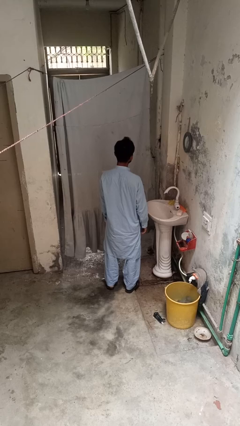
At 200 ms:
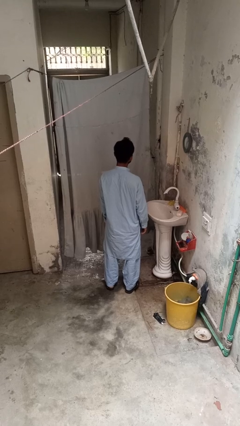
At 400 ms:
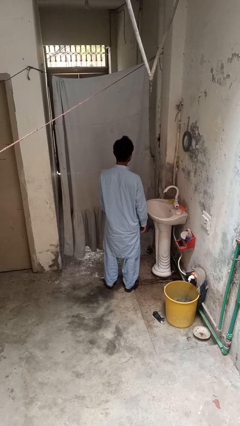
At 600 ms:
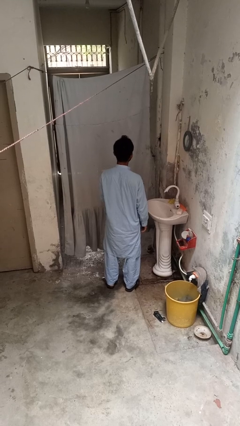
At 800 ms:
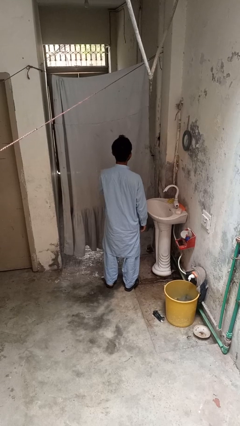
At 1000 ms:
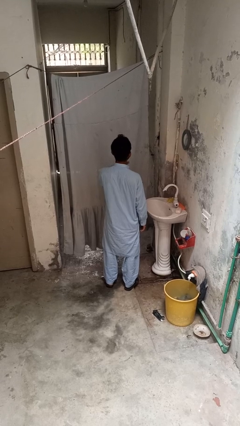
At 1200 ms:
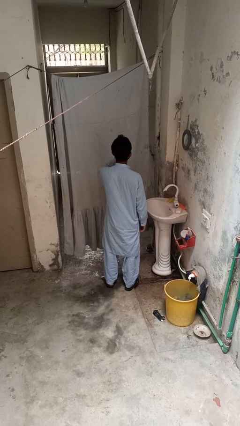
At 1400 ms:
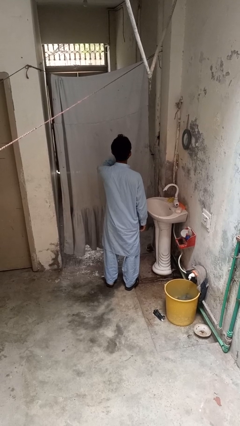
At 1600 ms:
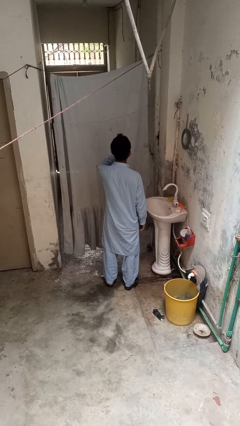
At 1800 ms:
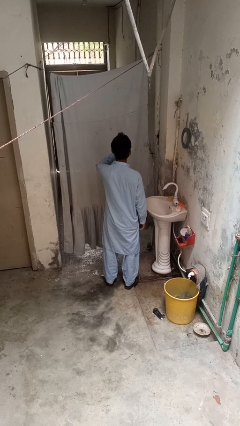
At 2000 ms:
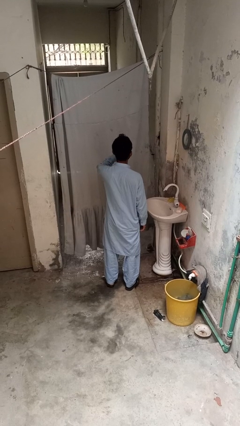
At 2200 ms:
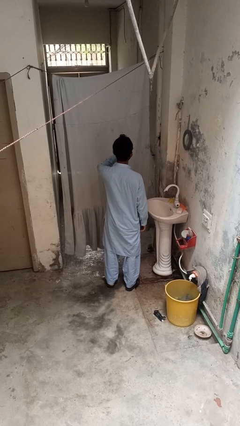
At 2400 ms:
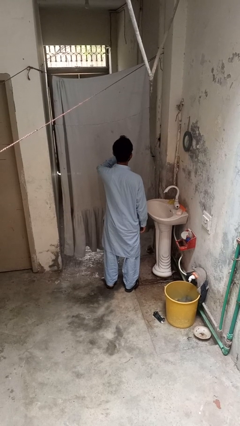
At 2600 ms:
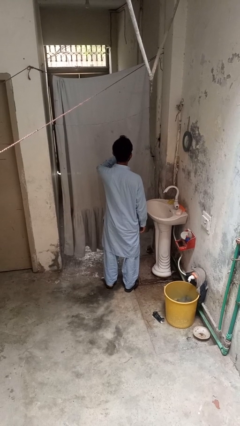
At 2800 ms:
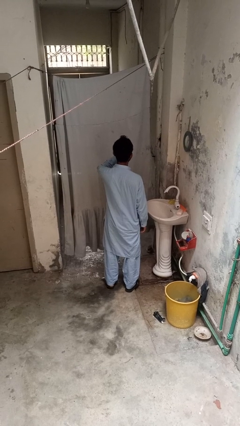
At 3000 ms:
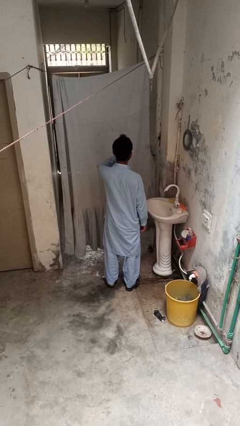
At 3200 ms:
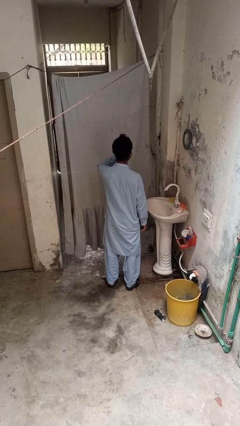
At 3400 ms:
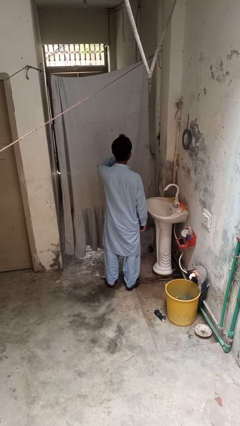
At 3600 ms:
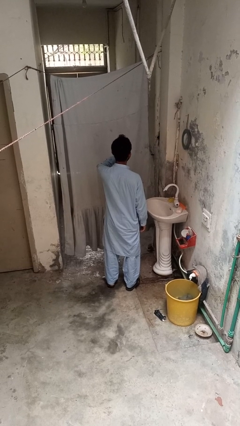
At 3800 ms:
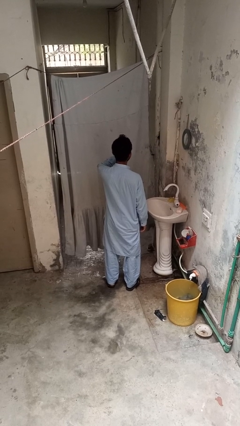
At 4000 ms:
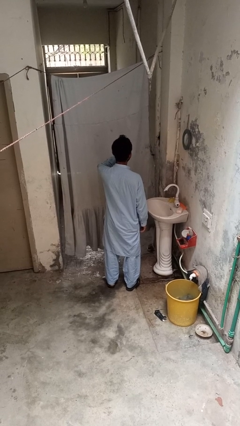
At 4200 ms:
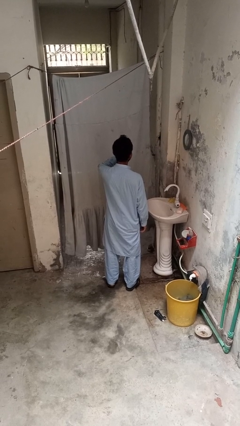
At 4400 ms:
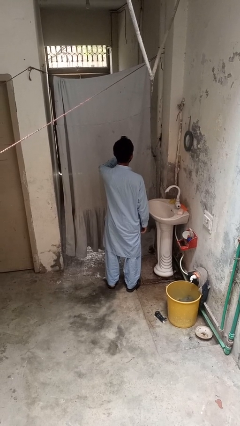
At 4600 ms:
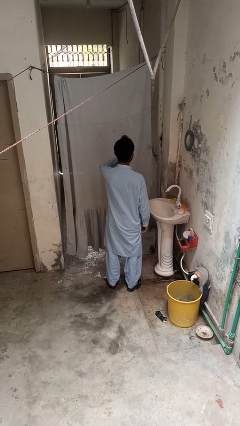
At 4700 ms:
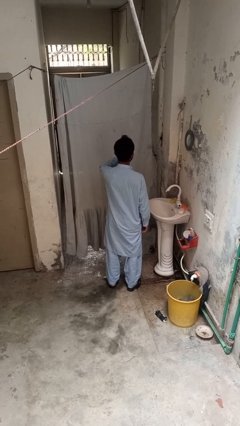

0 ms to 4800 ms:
person yawns

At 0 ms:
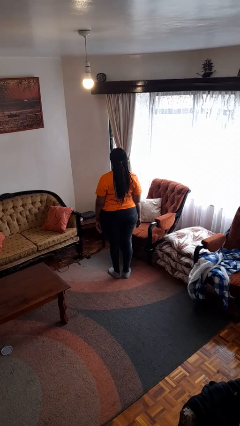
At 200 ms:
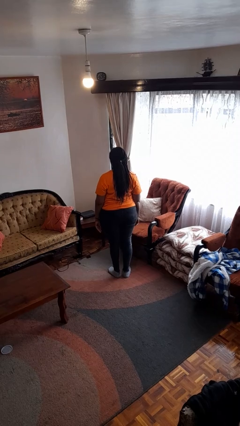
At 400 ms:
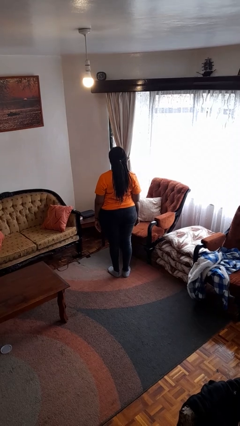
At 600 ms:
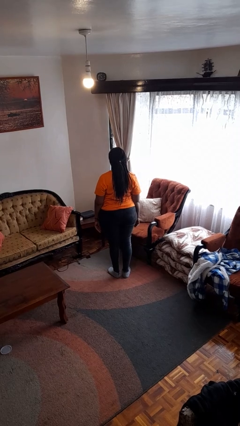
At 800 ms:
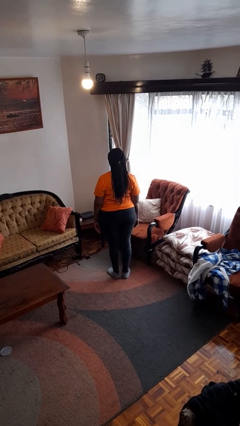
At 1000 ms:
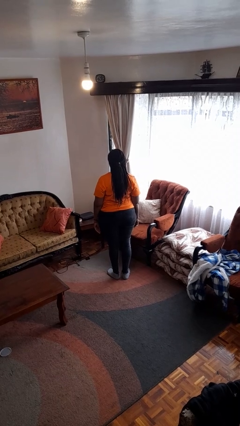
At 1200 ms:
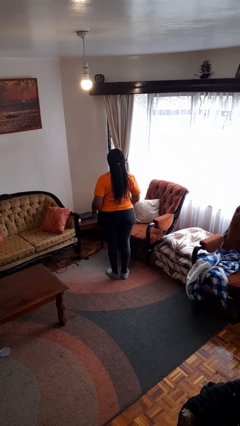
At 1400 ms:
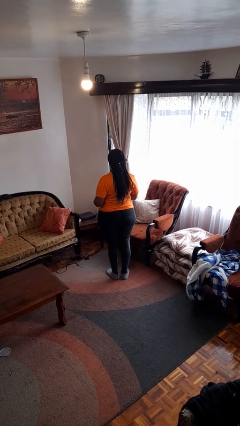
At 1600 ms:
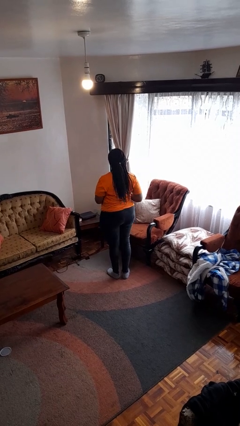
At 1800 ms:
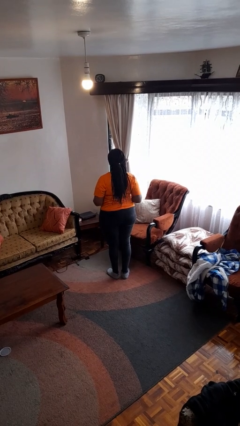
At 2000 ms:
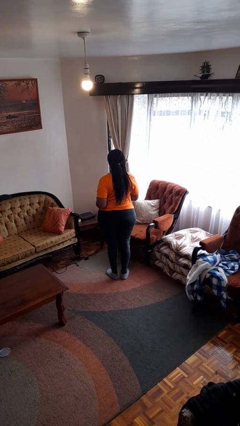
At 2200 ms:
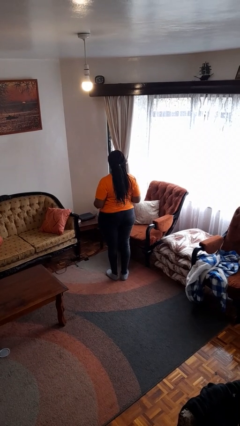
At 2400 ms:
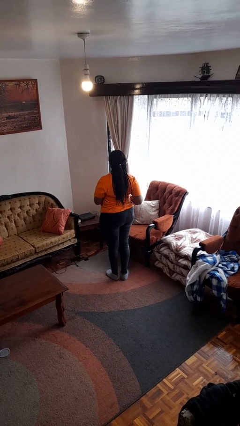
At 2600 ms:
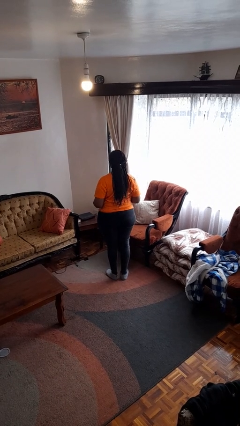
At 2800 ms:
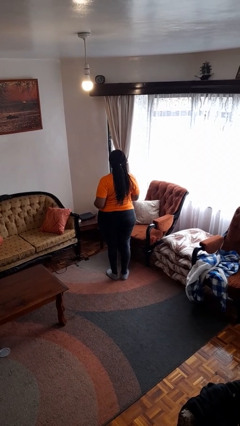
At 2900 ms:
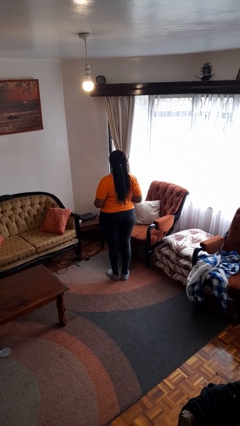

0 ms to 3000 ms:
person wiggles hips

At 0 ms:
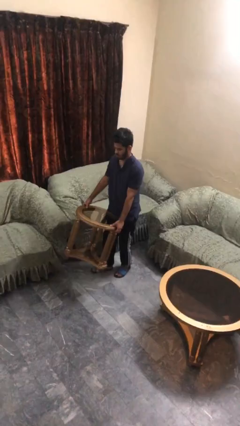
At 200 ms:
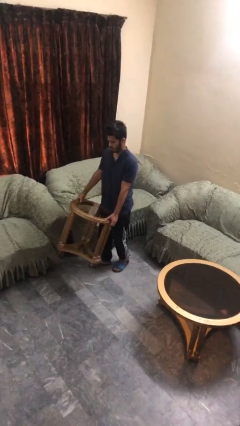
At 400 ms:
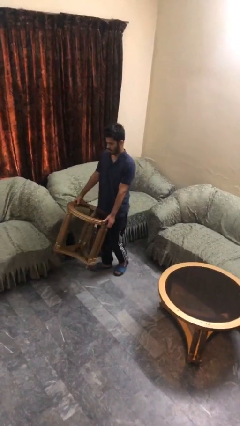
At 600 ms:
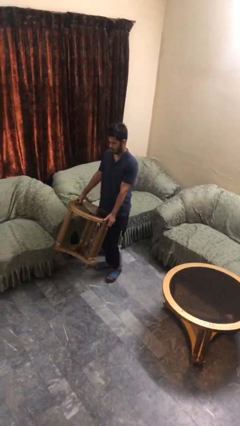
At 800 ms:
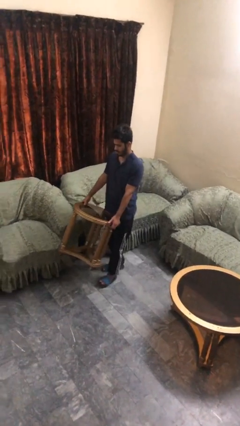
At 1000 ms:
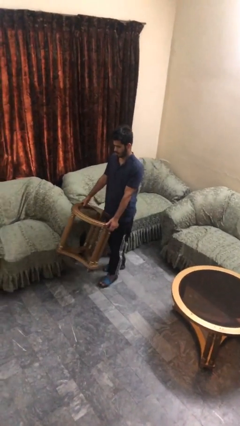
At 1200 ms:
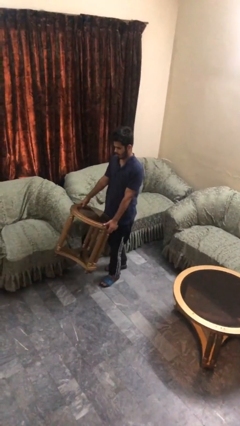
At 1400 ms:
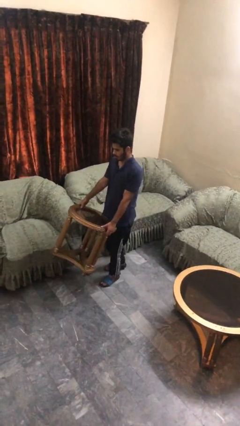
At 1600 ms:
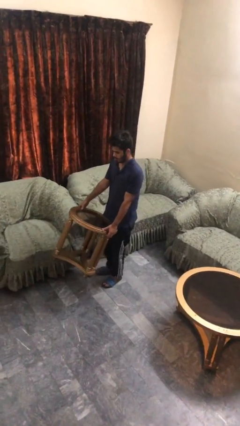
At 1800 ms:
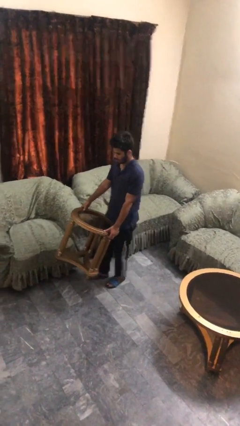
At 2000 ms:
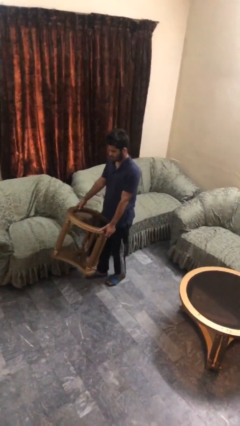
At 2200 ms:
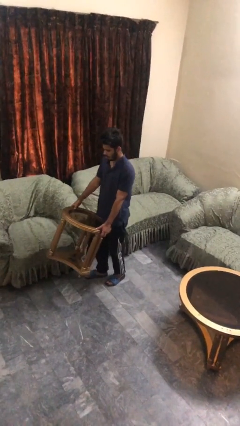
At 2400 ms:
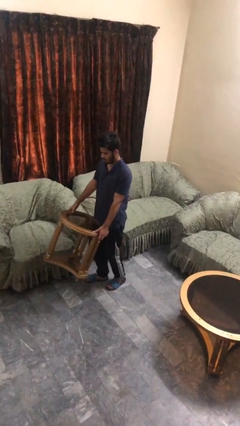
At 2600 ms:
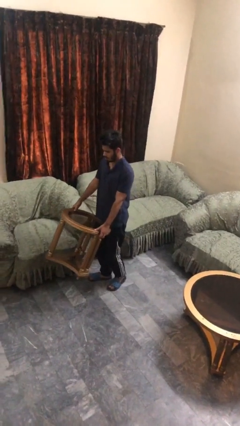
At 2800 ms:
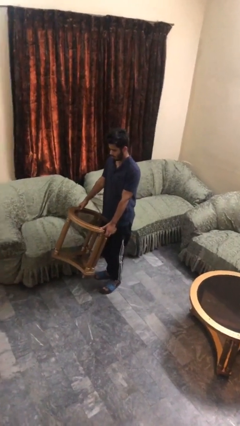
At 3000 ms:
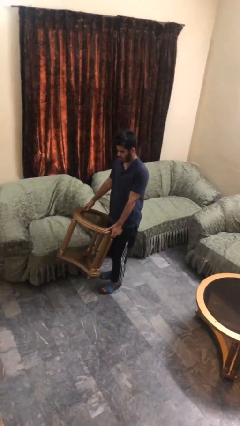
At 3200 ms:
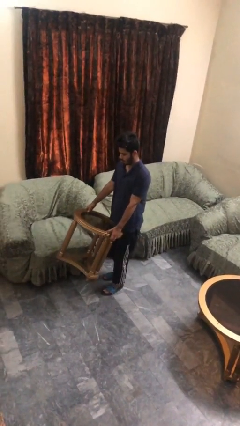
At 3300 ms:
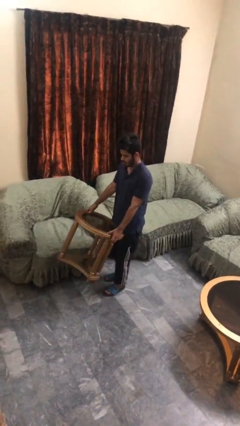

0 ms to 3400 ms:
person carries heavy object

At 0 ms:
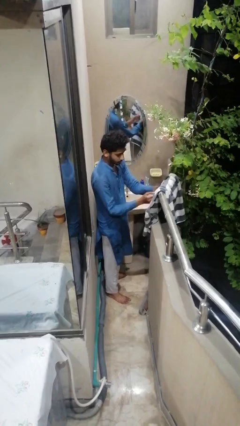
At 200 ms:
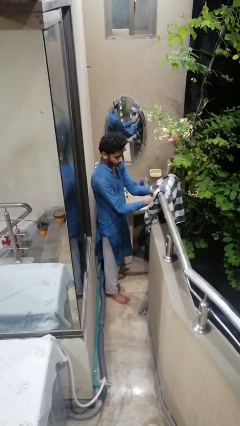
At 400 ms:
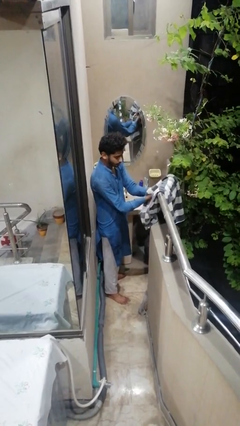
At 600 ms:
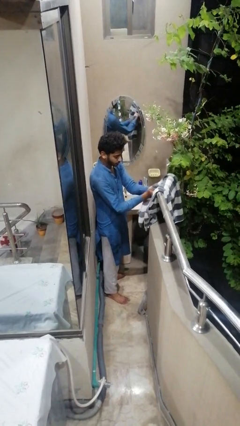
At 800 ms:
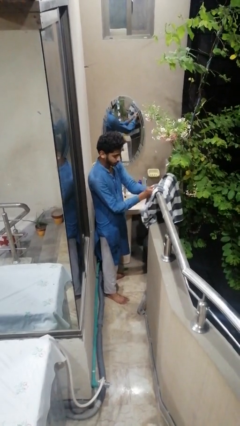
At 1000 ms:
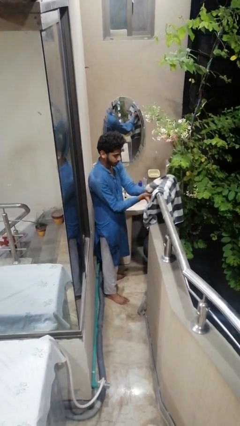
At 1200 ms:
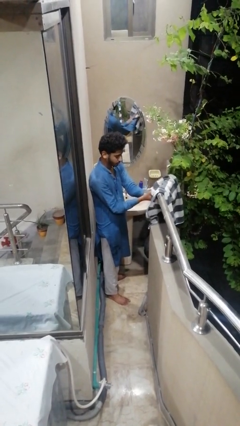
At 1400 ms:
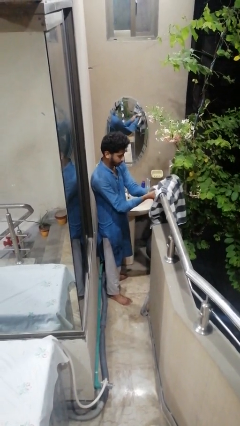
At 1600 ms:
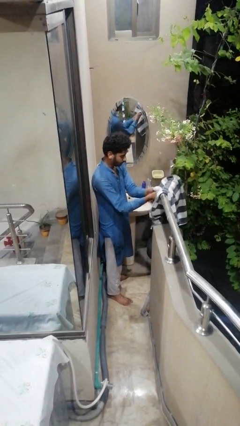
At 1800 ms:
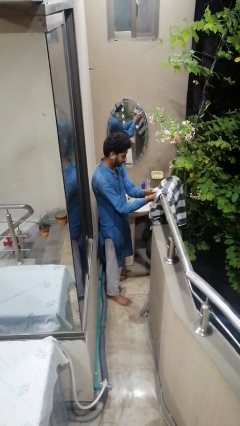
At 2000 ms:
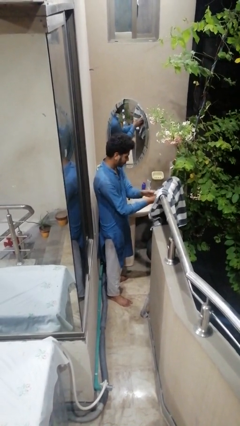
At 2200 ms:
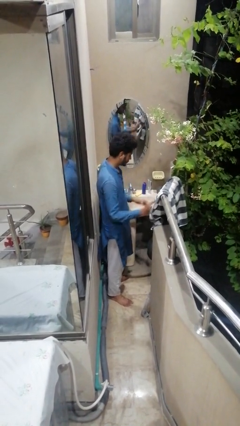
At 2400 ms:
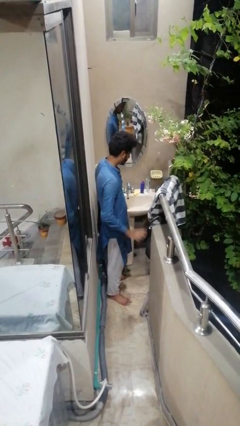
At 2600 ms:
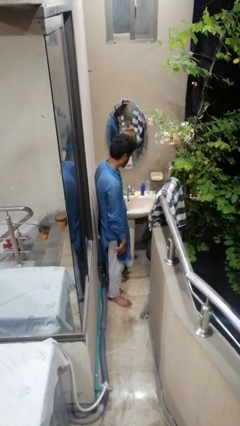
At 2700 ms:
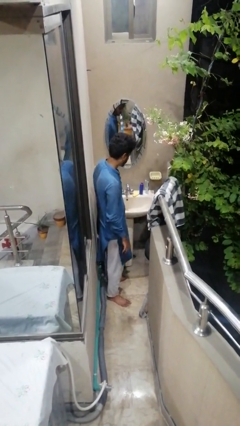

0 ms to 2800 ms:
person dries hands with towel

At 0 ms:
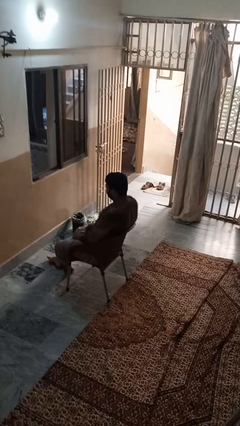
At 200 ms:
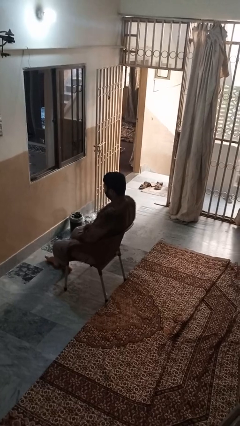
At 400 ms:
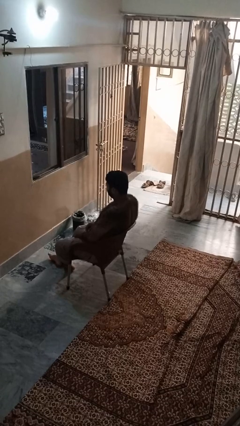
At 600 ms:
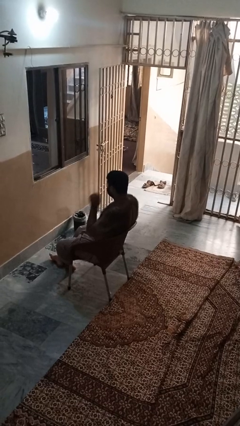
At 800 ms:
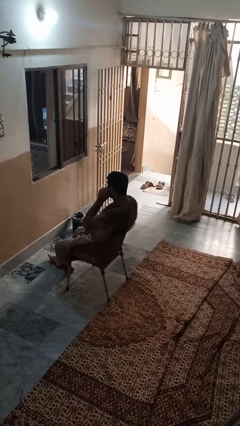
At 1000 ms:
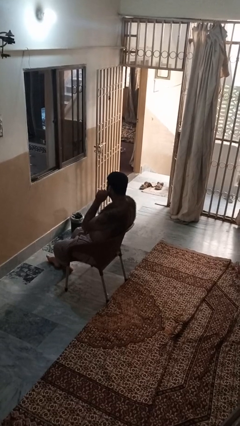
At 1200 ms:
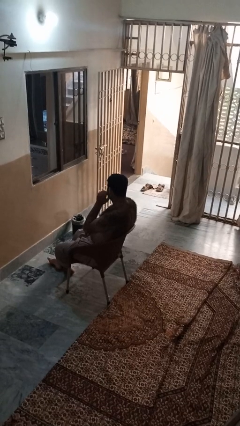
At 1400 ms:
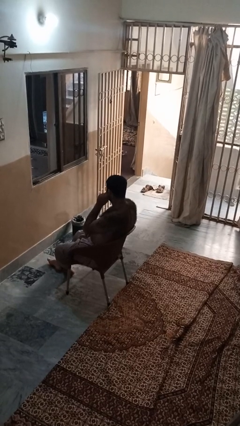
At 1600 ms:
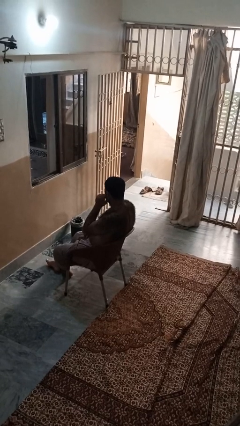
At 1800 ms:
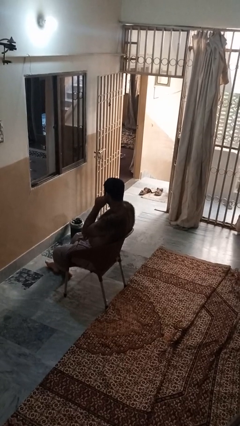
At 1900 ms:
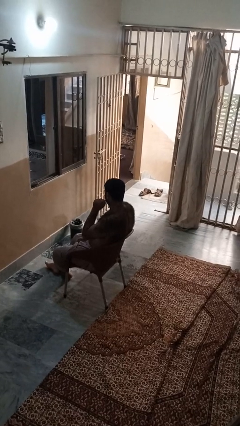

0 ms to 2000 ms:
person touches earlobe

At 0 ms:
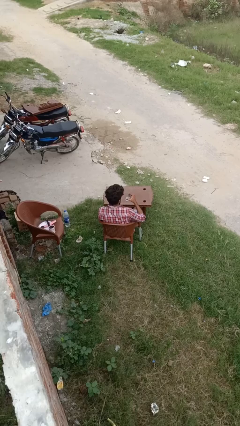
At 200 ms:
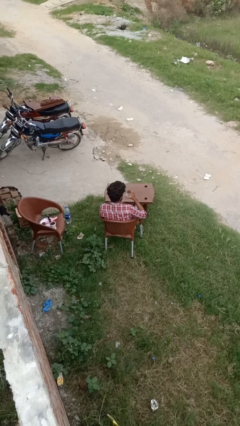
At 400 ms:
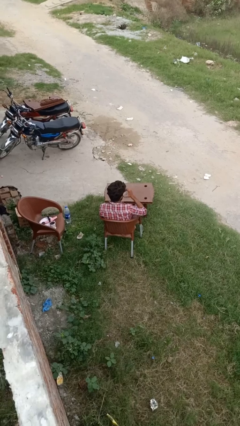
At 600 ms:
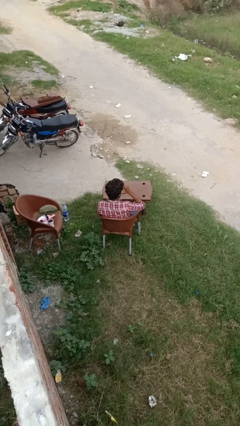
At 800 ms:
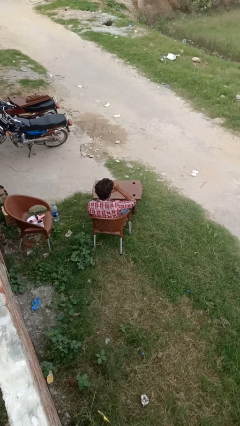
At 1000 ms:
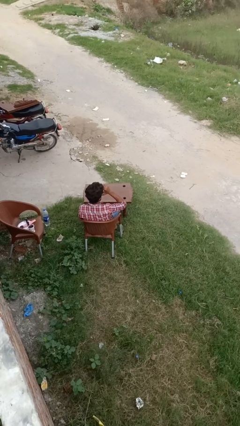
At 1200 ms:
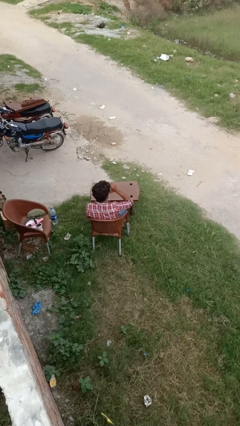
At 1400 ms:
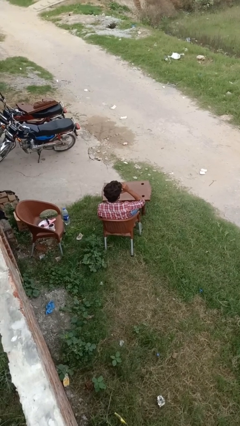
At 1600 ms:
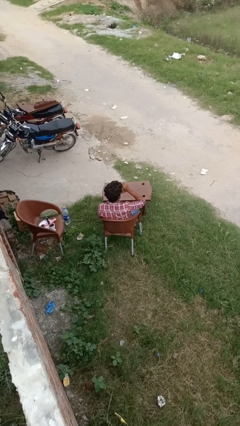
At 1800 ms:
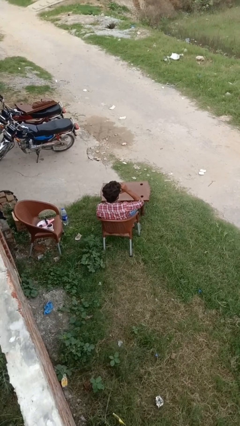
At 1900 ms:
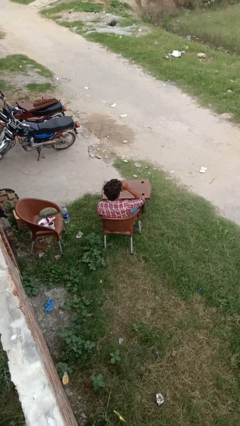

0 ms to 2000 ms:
person drinks from shotglass
